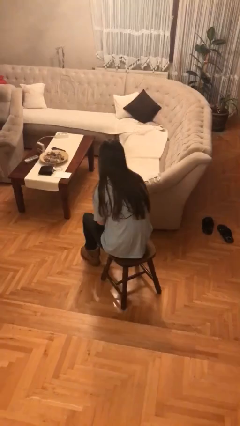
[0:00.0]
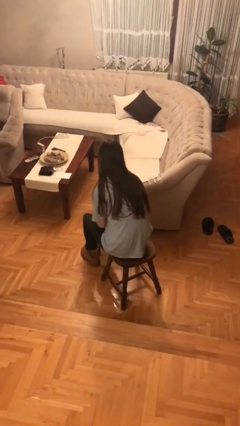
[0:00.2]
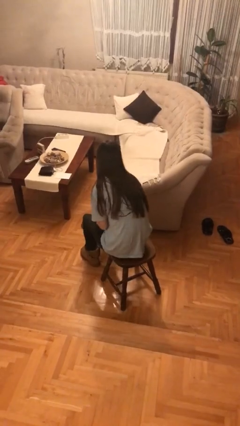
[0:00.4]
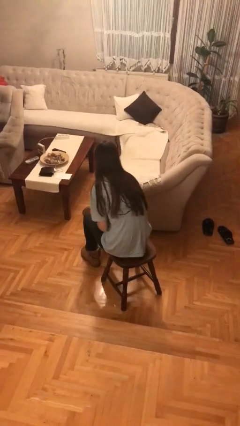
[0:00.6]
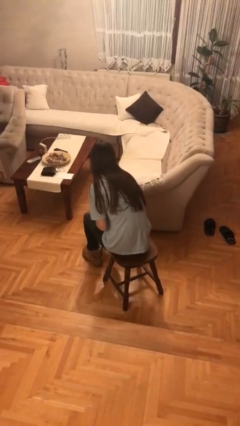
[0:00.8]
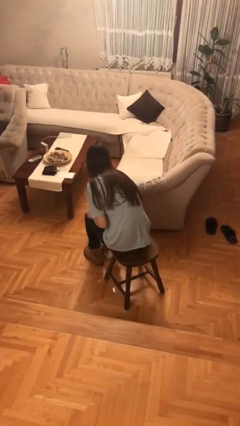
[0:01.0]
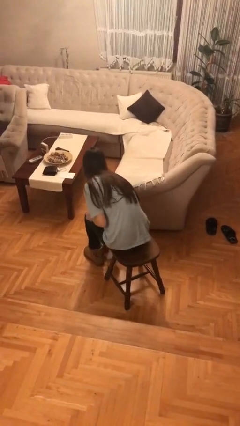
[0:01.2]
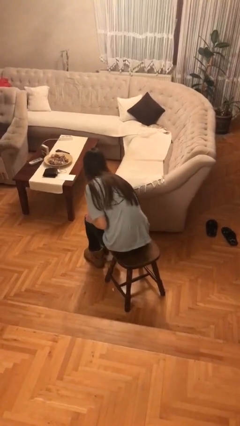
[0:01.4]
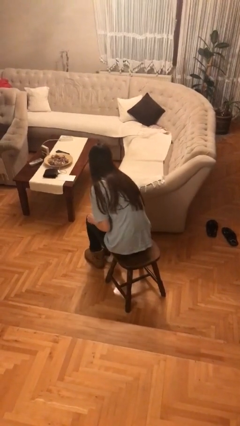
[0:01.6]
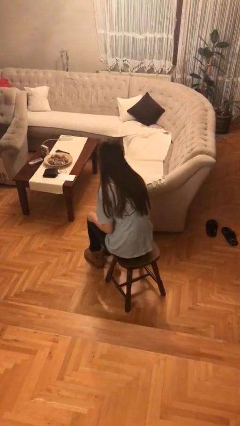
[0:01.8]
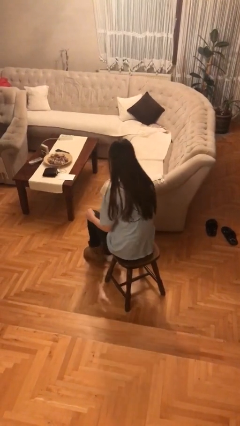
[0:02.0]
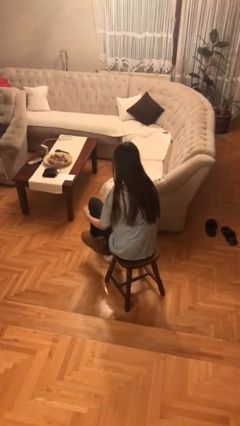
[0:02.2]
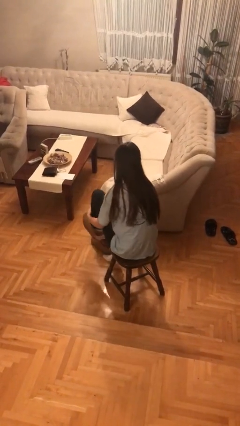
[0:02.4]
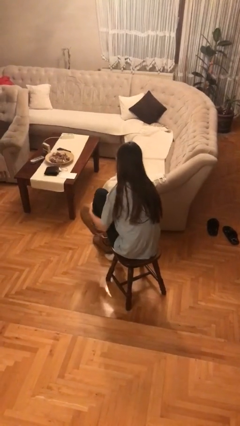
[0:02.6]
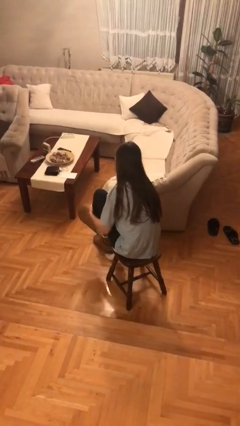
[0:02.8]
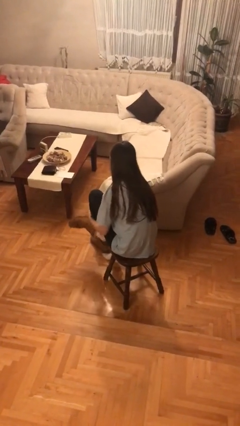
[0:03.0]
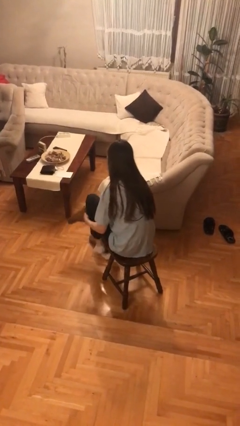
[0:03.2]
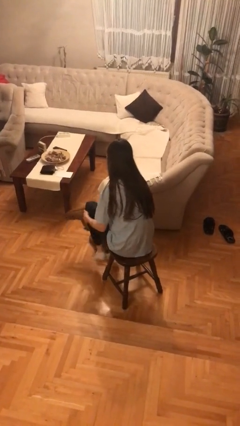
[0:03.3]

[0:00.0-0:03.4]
person takes off shoes

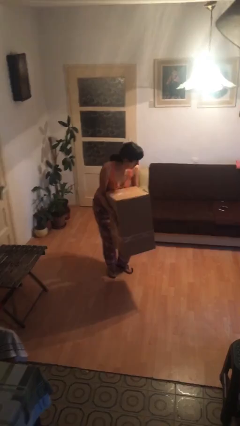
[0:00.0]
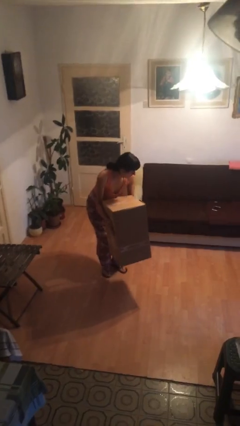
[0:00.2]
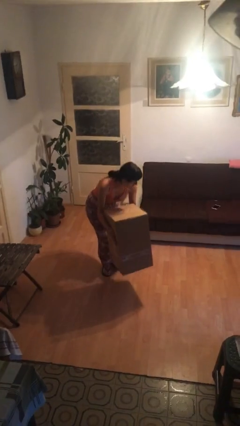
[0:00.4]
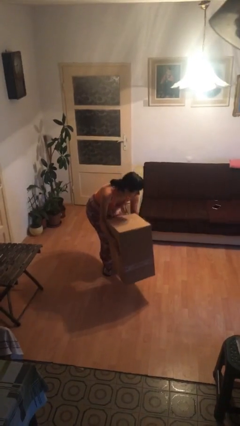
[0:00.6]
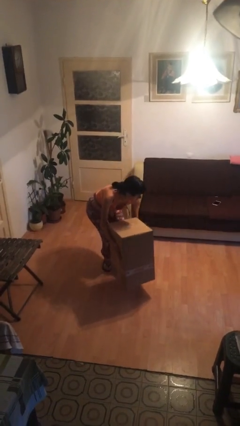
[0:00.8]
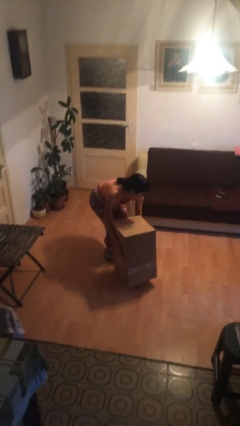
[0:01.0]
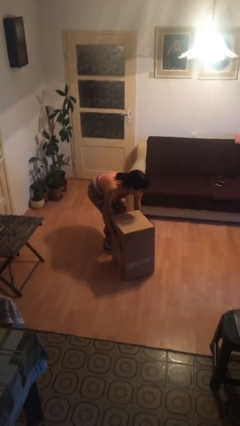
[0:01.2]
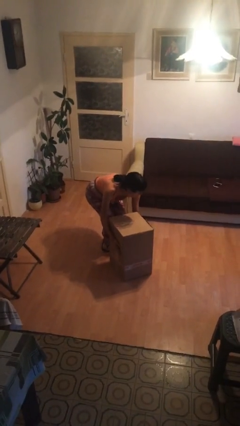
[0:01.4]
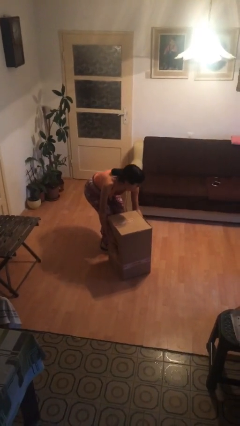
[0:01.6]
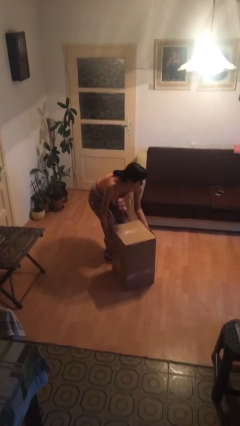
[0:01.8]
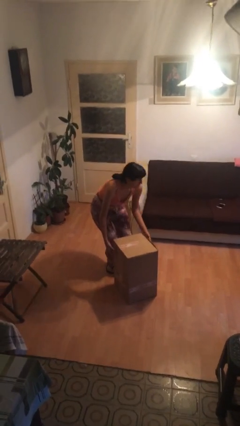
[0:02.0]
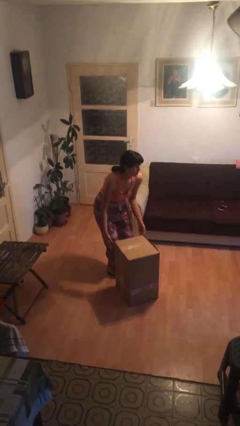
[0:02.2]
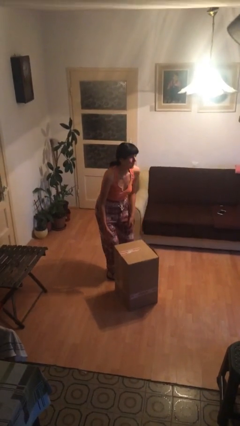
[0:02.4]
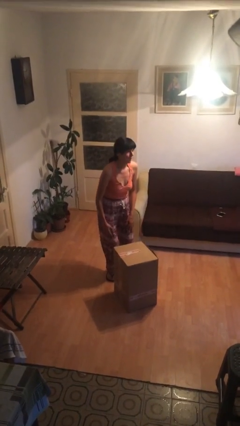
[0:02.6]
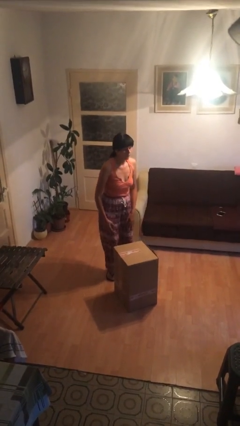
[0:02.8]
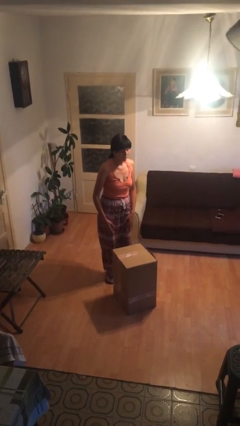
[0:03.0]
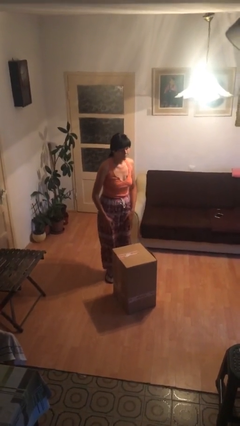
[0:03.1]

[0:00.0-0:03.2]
person puts down object on floor

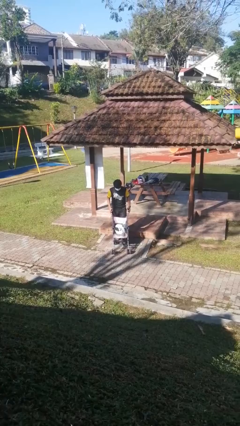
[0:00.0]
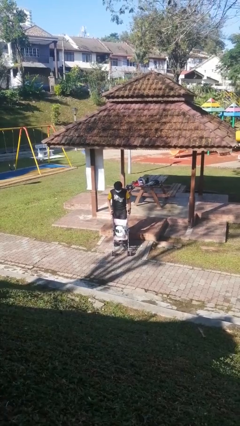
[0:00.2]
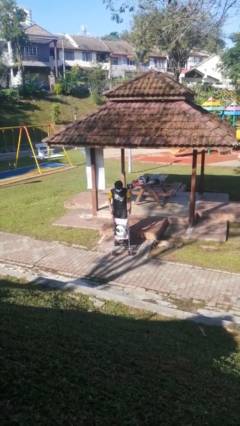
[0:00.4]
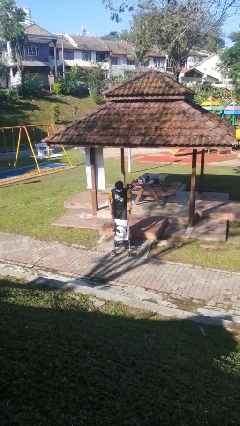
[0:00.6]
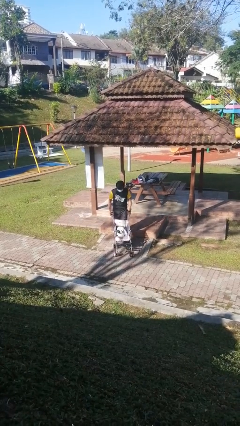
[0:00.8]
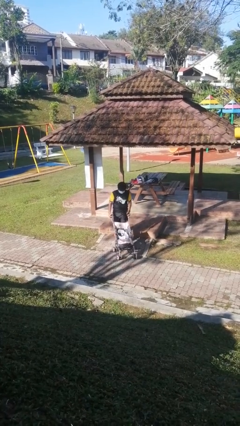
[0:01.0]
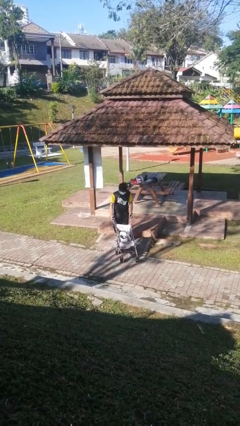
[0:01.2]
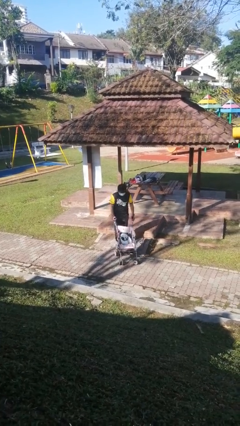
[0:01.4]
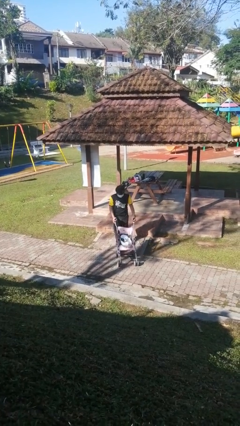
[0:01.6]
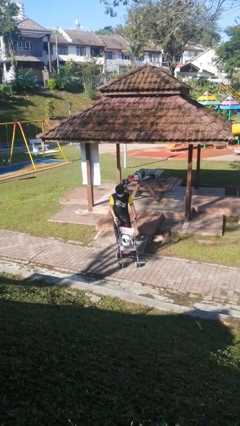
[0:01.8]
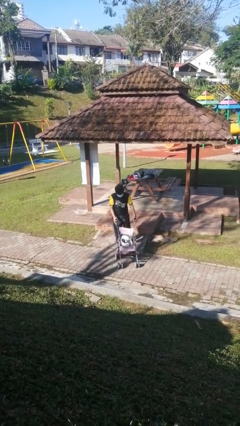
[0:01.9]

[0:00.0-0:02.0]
person pushes wheeled cart

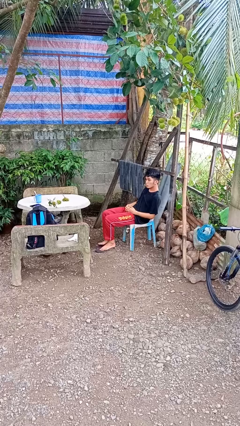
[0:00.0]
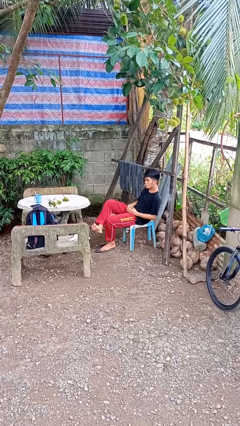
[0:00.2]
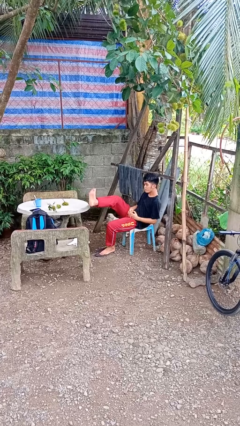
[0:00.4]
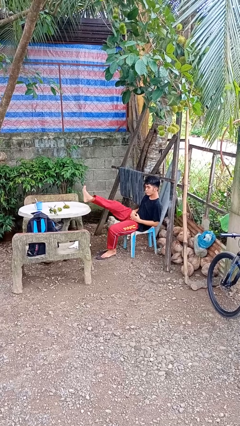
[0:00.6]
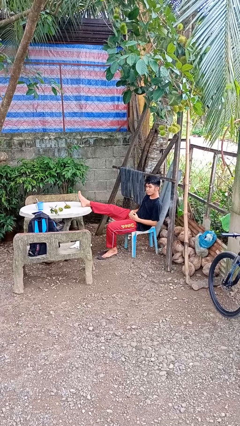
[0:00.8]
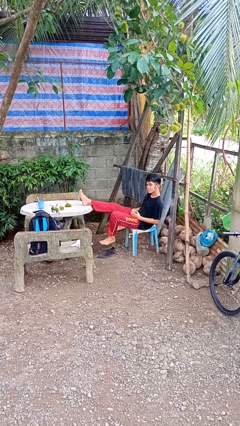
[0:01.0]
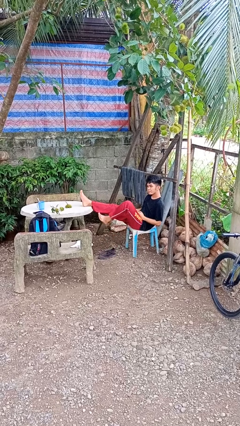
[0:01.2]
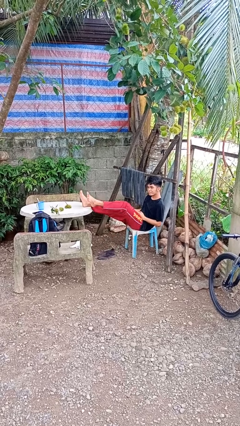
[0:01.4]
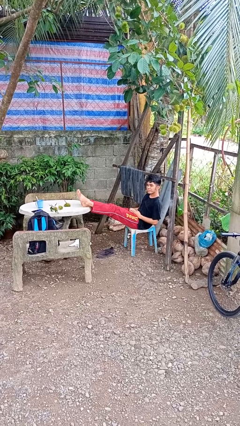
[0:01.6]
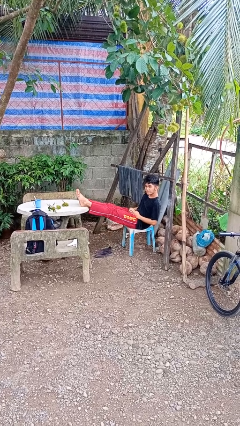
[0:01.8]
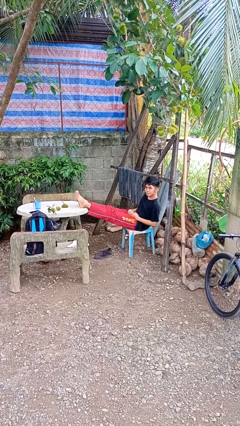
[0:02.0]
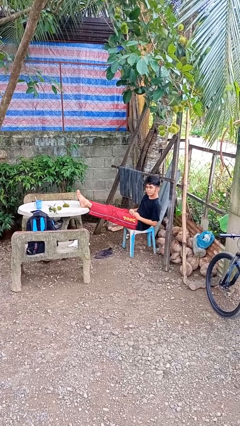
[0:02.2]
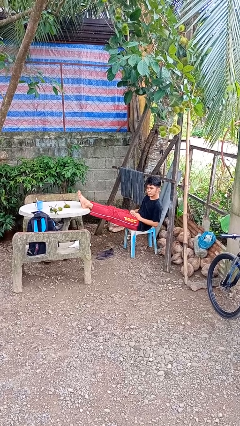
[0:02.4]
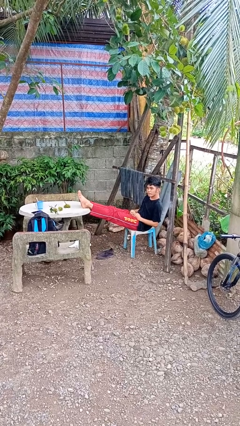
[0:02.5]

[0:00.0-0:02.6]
person puts feet up

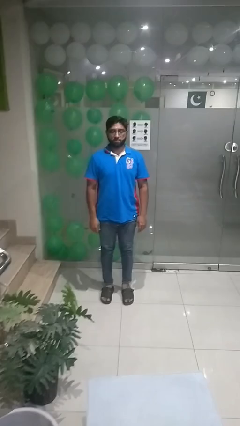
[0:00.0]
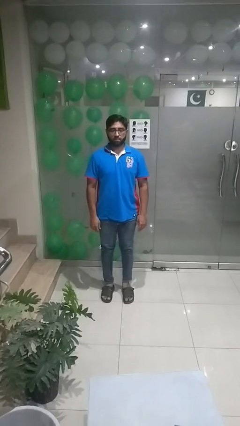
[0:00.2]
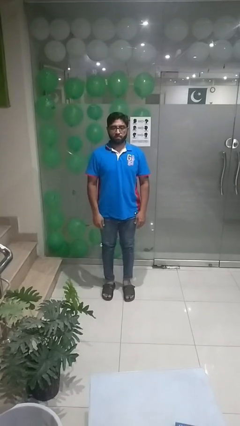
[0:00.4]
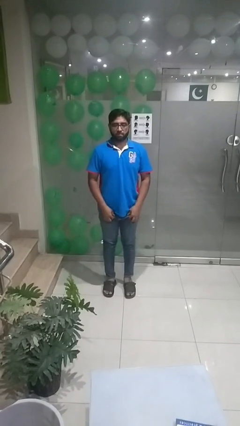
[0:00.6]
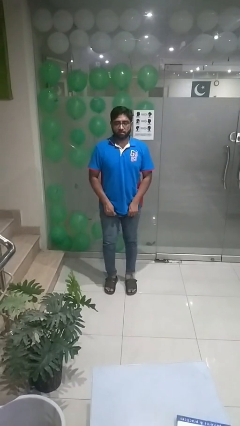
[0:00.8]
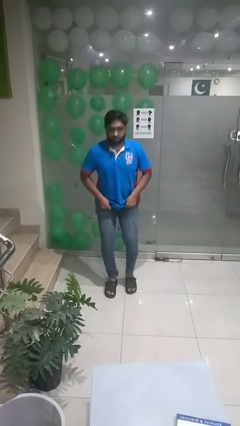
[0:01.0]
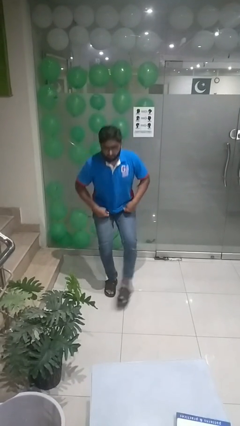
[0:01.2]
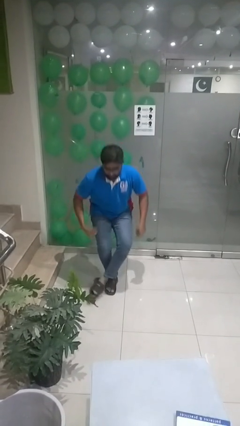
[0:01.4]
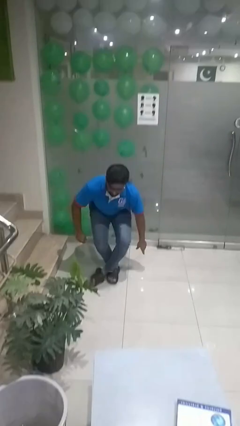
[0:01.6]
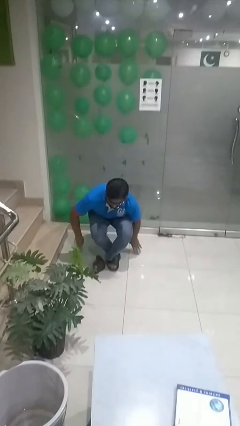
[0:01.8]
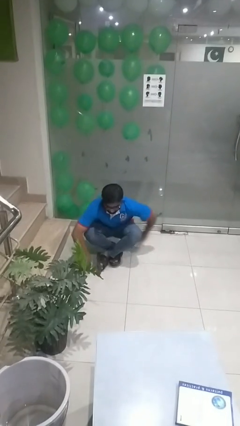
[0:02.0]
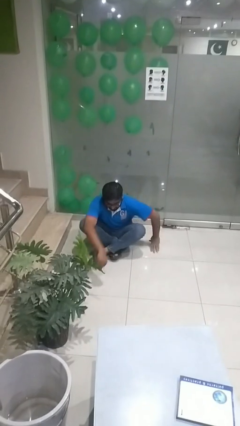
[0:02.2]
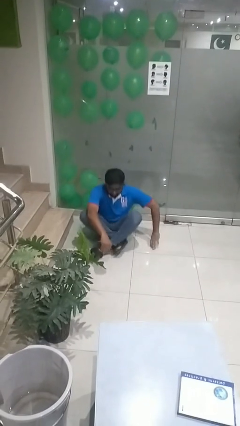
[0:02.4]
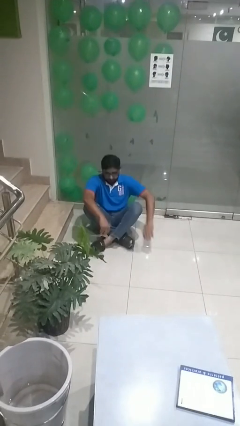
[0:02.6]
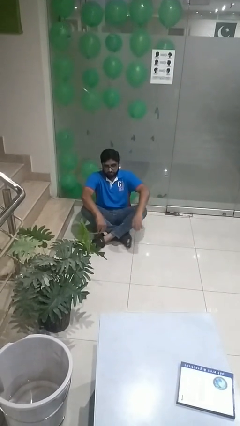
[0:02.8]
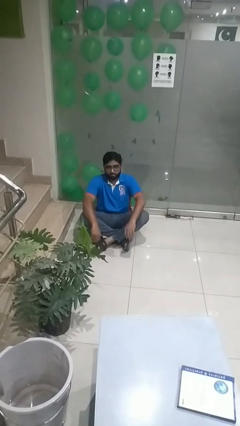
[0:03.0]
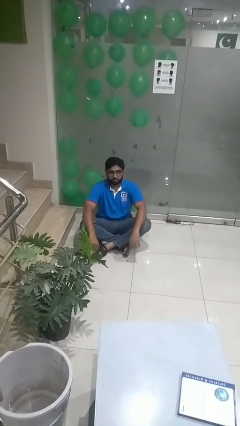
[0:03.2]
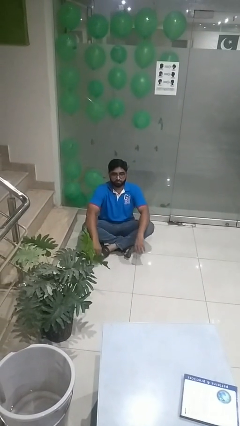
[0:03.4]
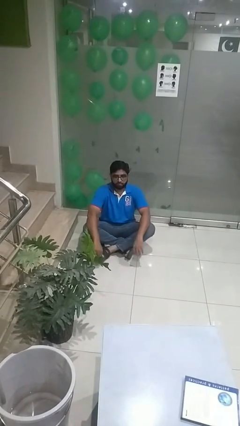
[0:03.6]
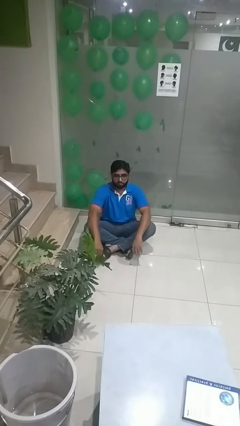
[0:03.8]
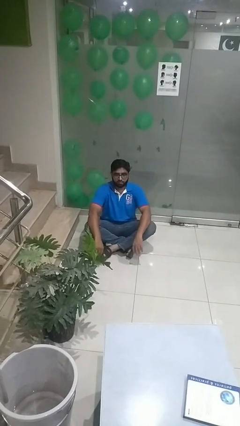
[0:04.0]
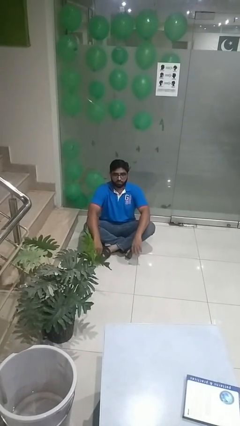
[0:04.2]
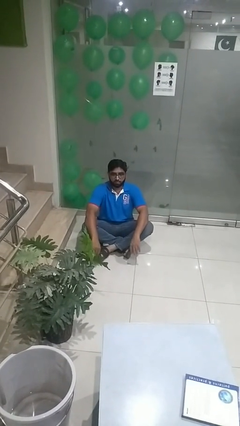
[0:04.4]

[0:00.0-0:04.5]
person sits crisscross

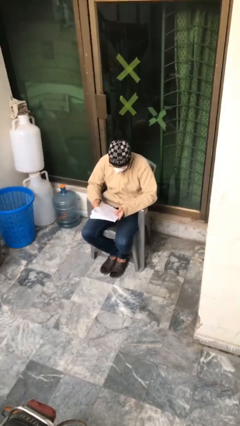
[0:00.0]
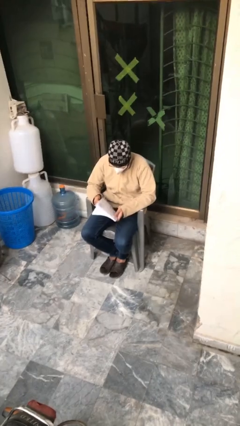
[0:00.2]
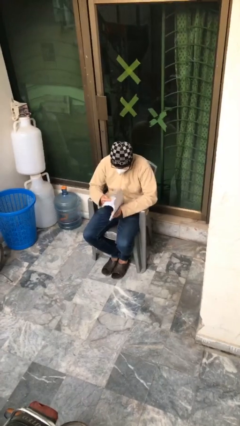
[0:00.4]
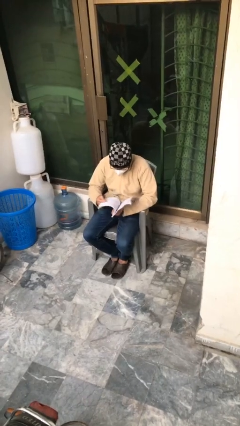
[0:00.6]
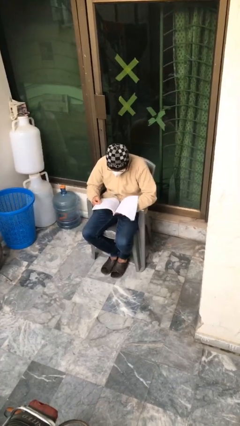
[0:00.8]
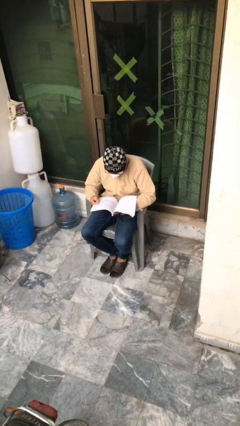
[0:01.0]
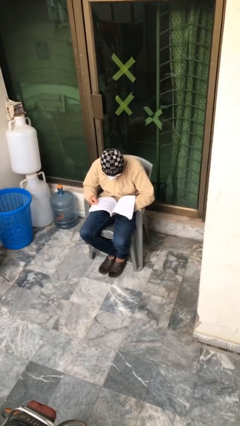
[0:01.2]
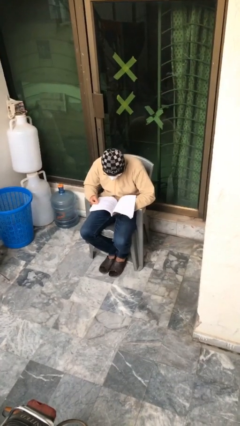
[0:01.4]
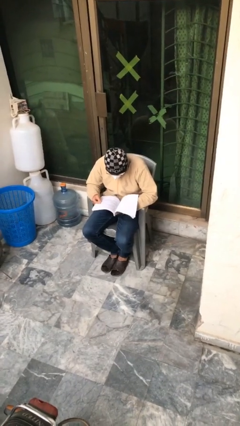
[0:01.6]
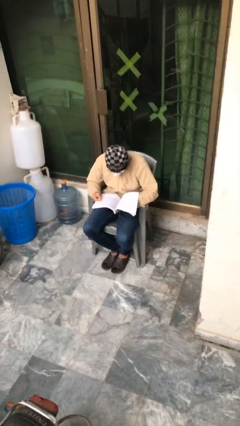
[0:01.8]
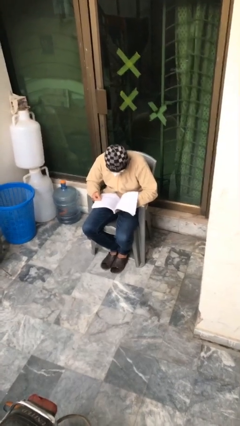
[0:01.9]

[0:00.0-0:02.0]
person reads document
